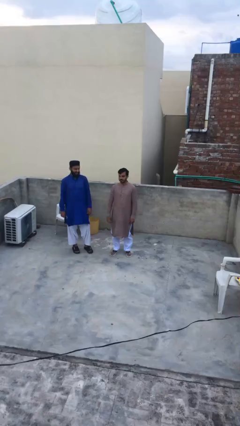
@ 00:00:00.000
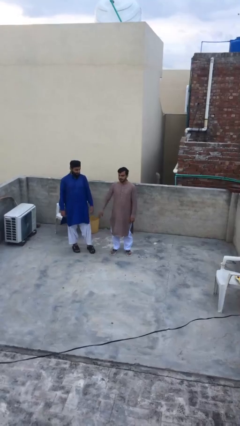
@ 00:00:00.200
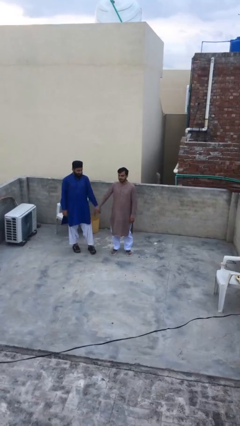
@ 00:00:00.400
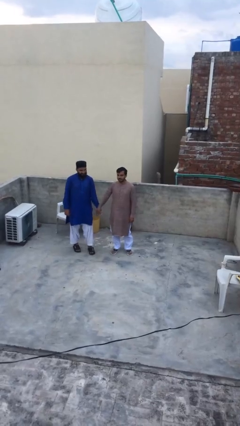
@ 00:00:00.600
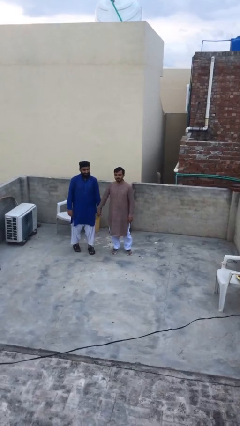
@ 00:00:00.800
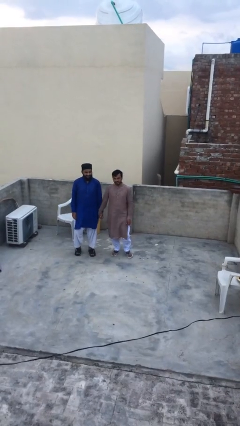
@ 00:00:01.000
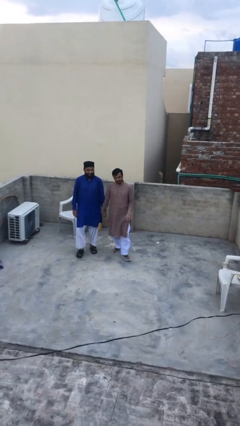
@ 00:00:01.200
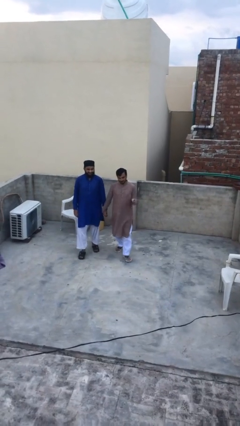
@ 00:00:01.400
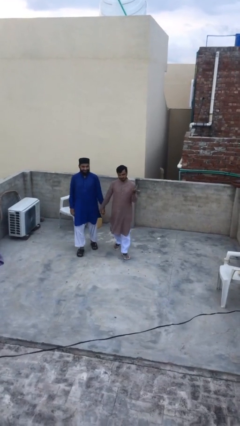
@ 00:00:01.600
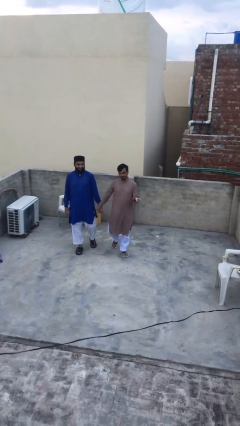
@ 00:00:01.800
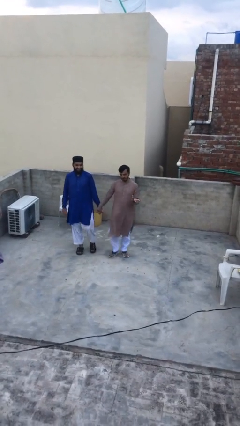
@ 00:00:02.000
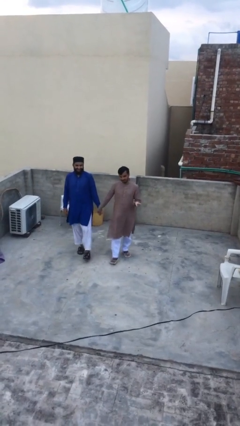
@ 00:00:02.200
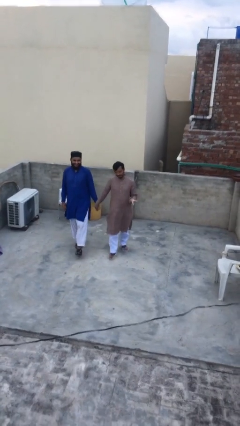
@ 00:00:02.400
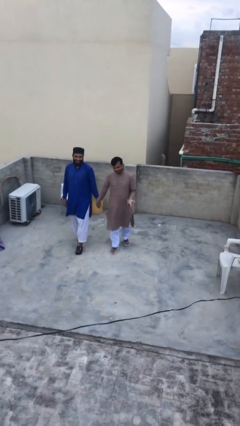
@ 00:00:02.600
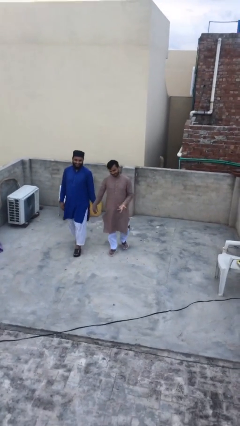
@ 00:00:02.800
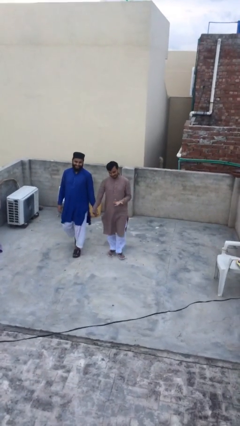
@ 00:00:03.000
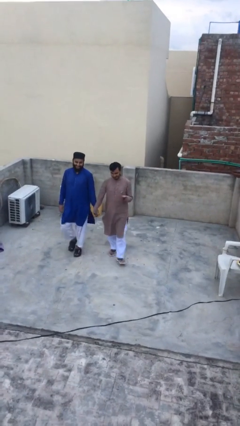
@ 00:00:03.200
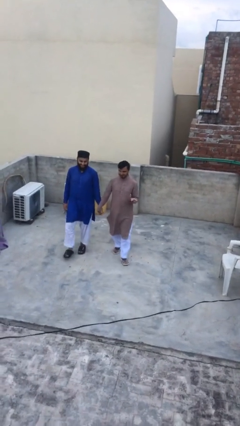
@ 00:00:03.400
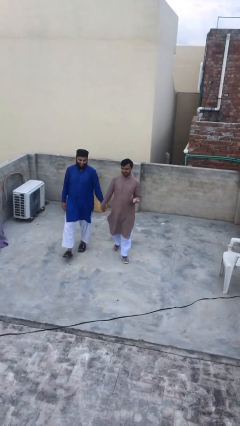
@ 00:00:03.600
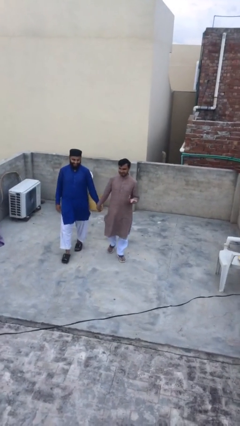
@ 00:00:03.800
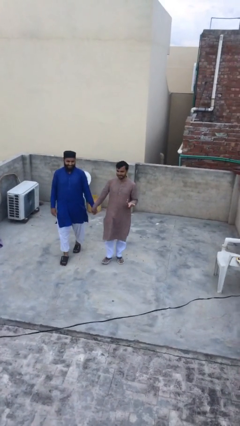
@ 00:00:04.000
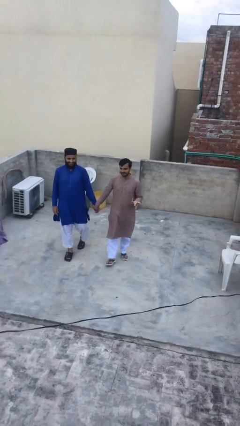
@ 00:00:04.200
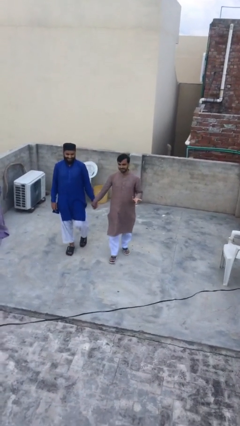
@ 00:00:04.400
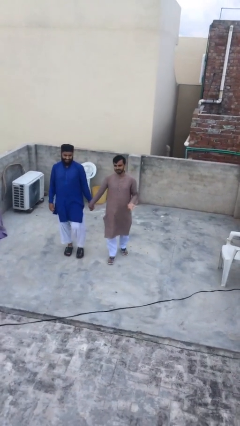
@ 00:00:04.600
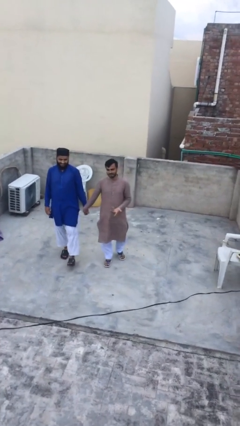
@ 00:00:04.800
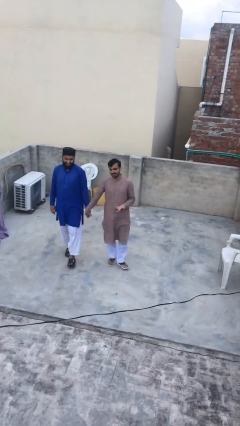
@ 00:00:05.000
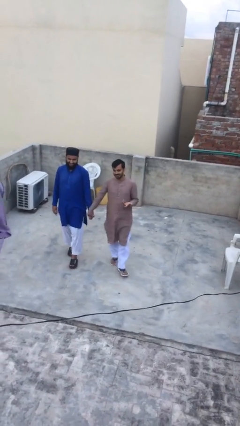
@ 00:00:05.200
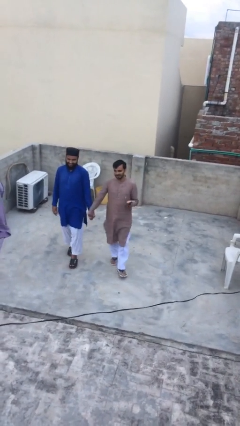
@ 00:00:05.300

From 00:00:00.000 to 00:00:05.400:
person holds hand

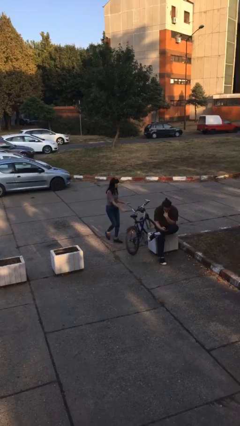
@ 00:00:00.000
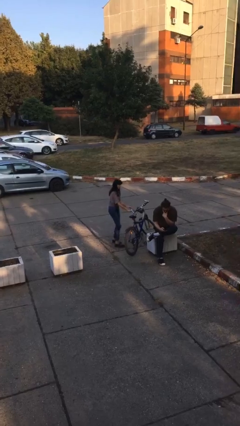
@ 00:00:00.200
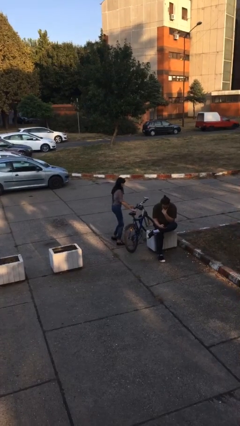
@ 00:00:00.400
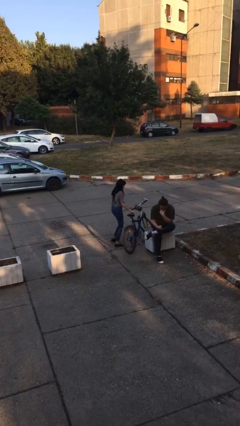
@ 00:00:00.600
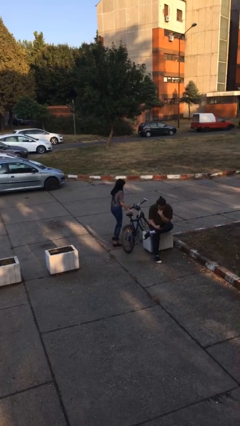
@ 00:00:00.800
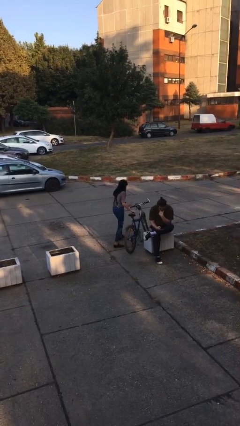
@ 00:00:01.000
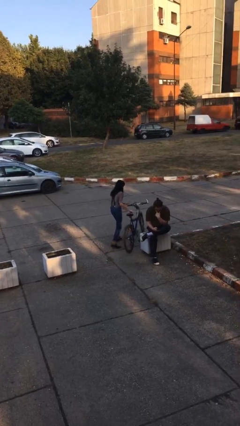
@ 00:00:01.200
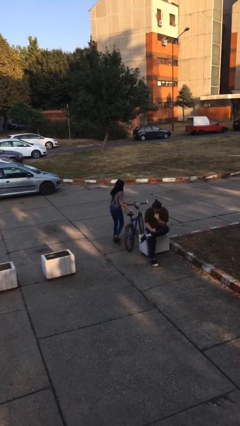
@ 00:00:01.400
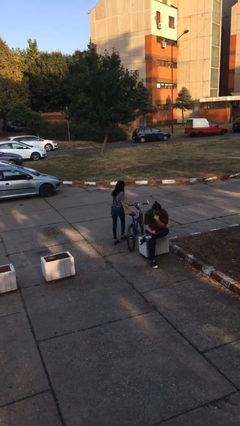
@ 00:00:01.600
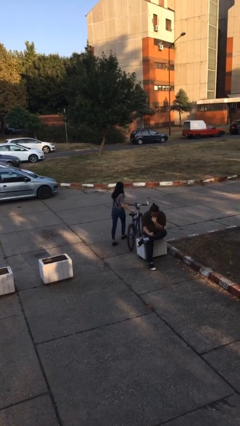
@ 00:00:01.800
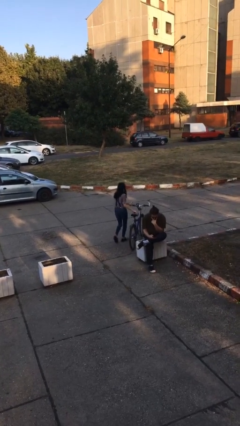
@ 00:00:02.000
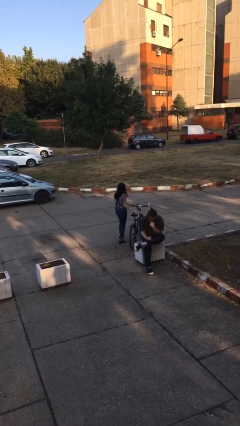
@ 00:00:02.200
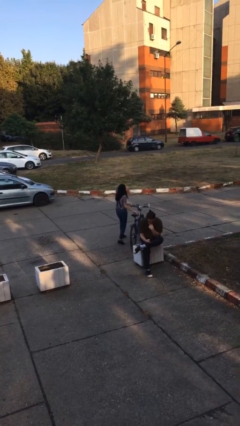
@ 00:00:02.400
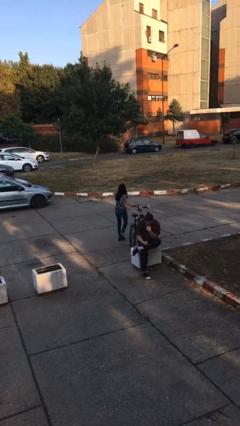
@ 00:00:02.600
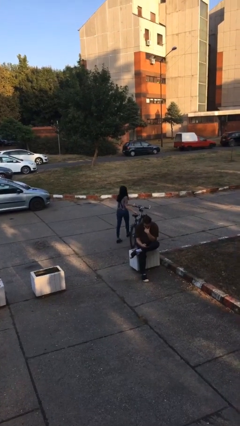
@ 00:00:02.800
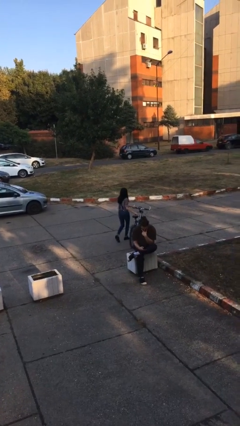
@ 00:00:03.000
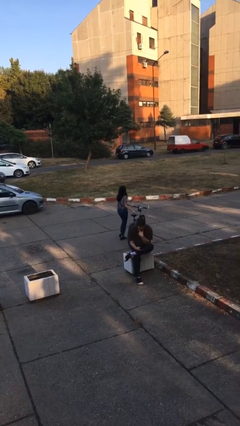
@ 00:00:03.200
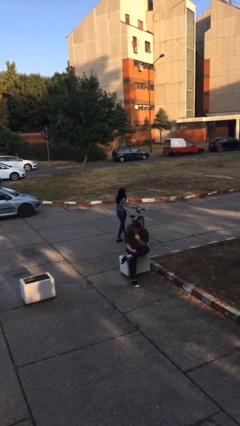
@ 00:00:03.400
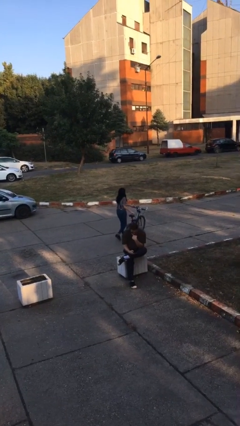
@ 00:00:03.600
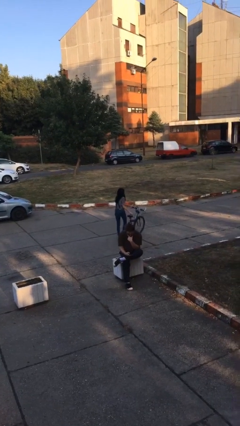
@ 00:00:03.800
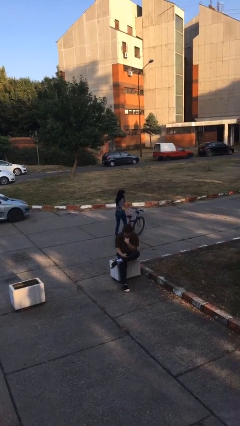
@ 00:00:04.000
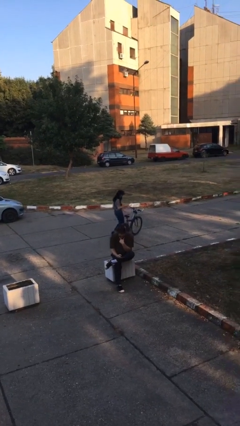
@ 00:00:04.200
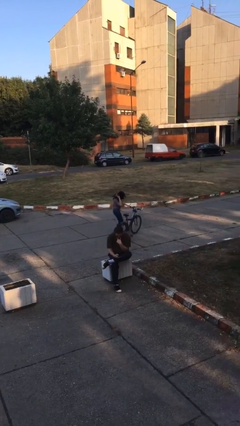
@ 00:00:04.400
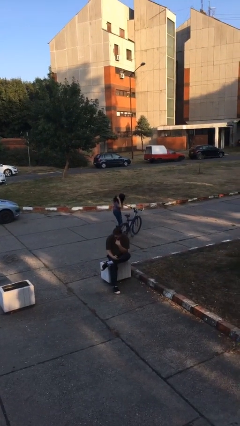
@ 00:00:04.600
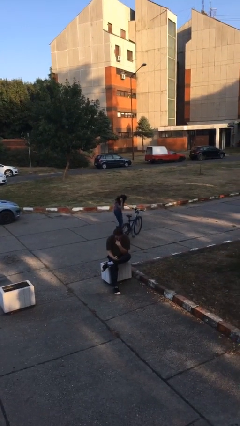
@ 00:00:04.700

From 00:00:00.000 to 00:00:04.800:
person steals object from person

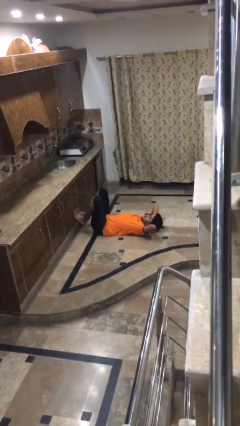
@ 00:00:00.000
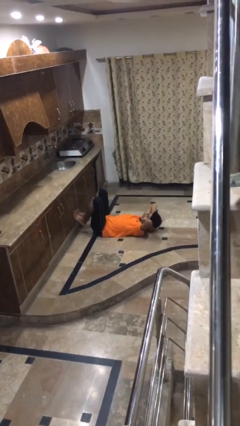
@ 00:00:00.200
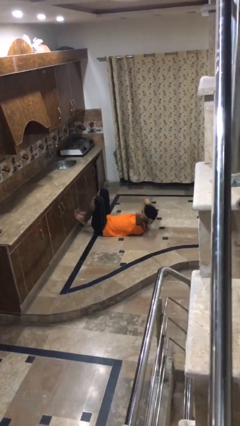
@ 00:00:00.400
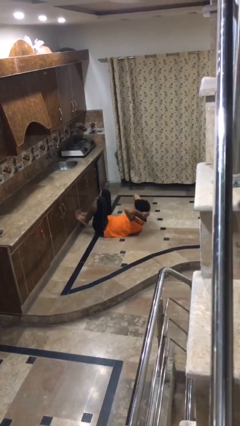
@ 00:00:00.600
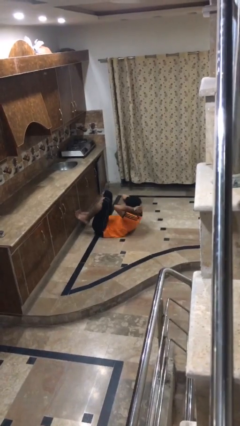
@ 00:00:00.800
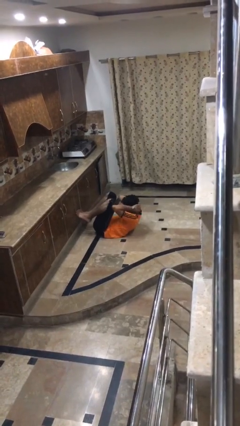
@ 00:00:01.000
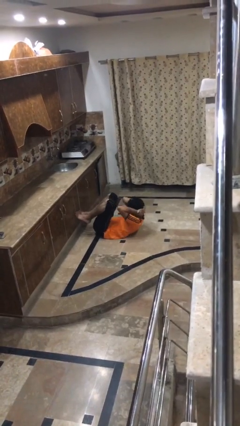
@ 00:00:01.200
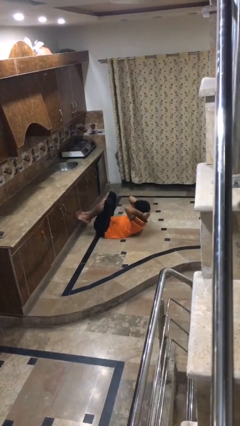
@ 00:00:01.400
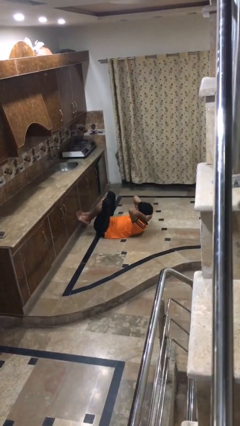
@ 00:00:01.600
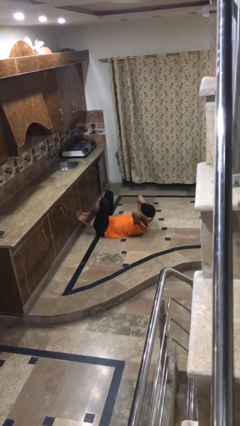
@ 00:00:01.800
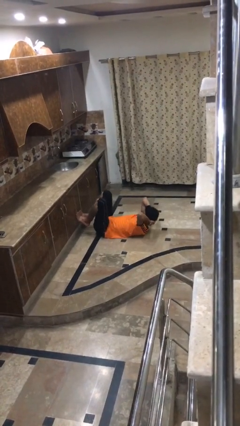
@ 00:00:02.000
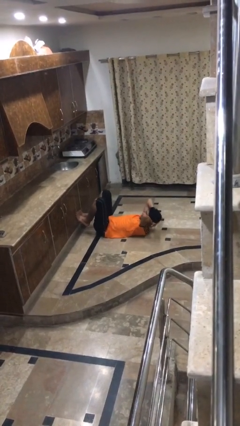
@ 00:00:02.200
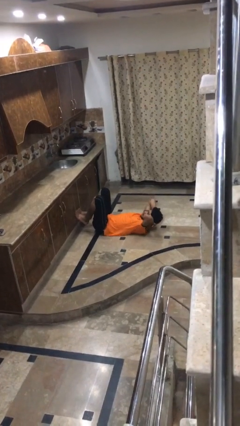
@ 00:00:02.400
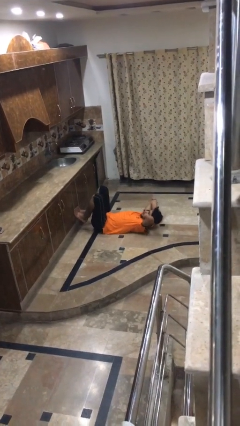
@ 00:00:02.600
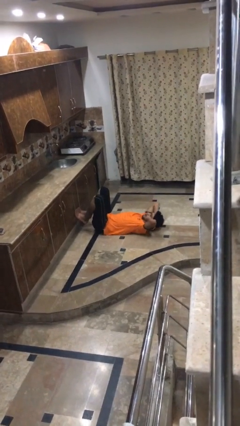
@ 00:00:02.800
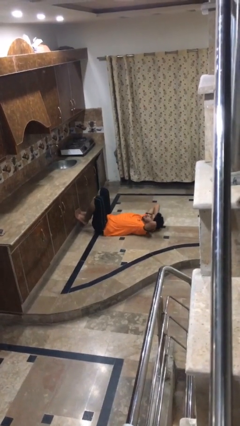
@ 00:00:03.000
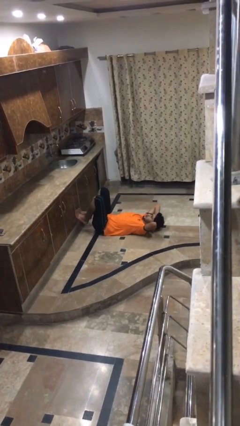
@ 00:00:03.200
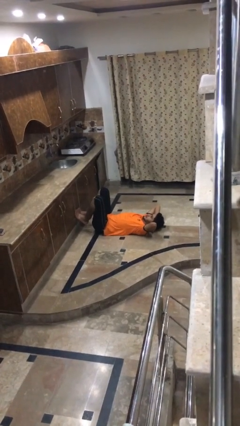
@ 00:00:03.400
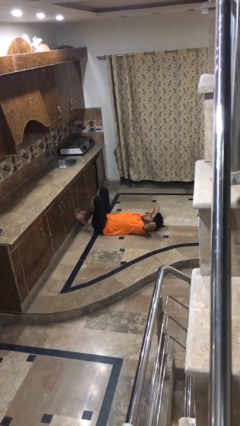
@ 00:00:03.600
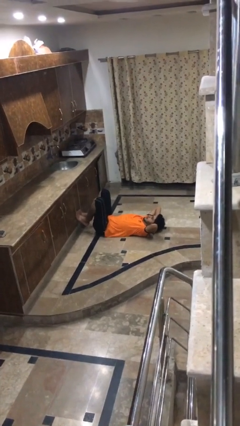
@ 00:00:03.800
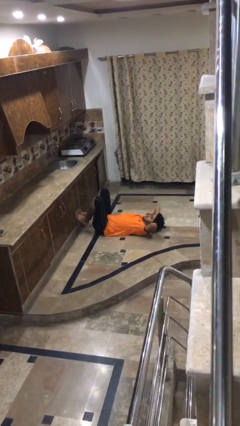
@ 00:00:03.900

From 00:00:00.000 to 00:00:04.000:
person exercises with situp

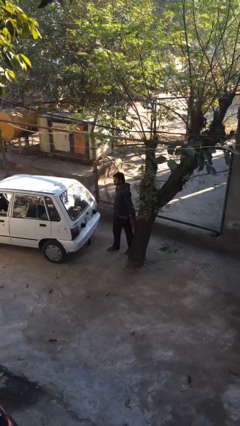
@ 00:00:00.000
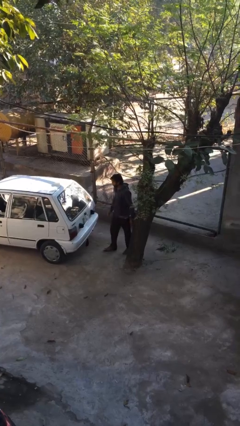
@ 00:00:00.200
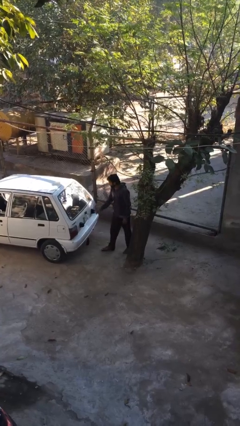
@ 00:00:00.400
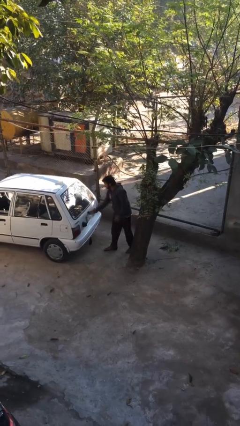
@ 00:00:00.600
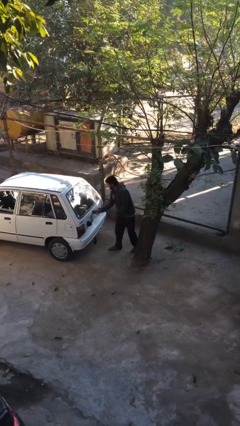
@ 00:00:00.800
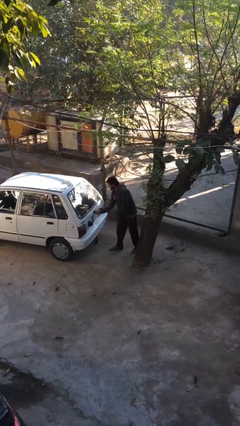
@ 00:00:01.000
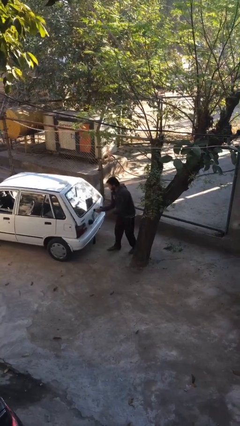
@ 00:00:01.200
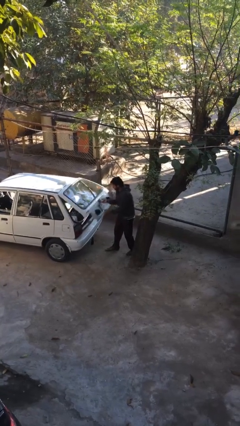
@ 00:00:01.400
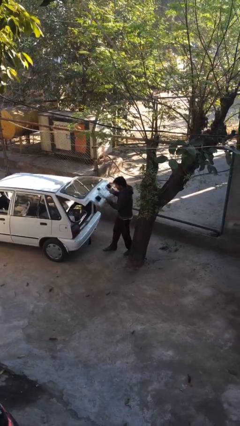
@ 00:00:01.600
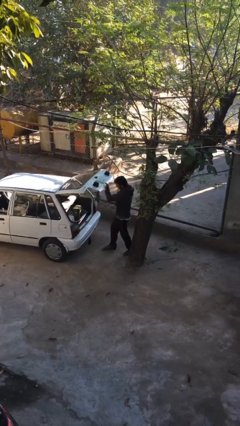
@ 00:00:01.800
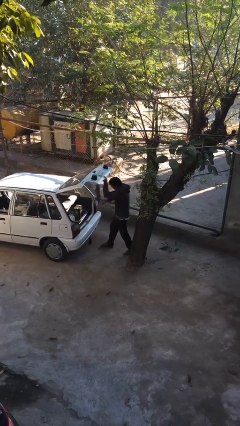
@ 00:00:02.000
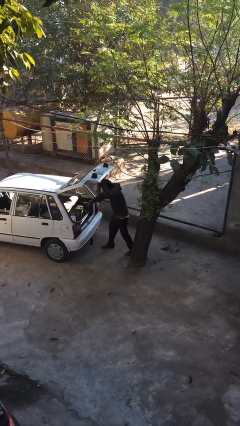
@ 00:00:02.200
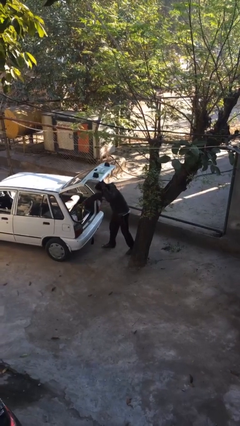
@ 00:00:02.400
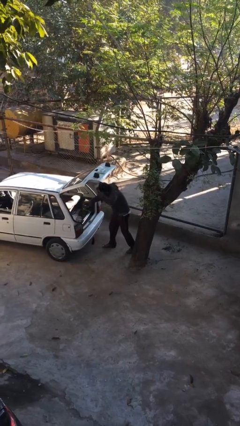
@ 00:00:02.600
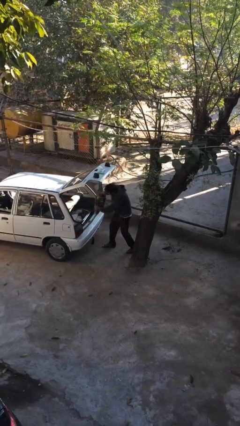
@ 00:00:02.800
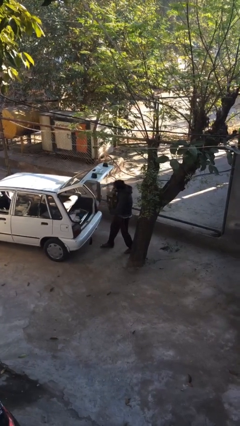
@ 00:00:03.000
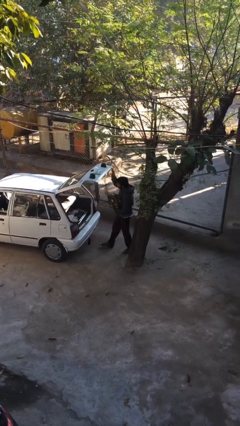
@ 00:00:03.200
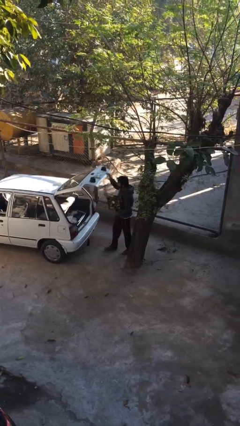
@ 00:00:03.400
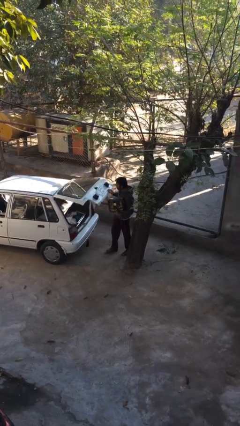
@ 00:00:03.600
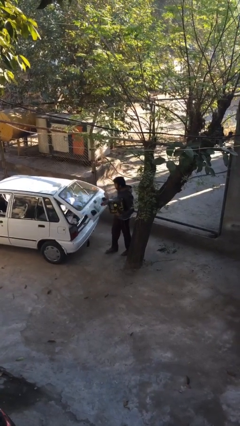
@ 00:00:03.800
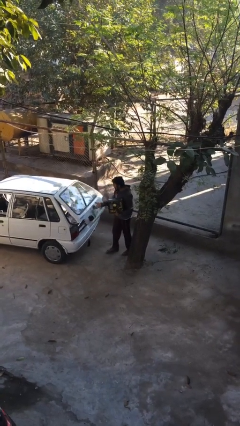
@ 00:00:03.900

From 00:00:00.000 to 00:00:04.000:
person unloads car
